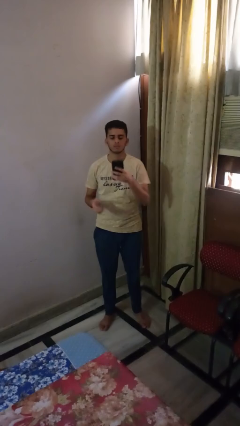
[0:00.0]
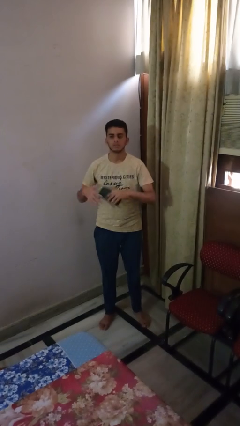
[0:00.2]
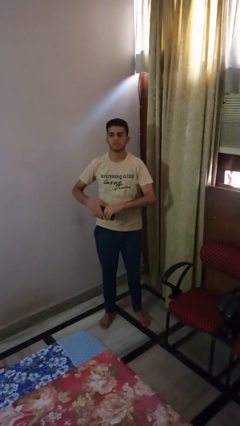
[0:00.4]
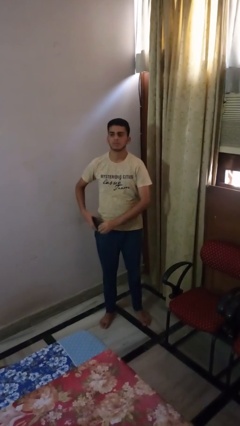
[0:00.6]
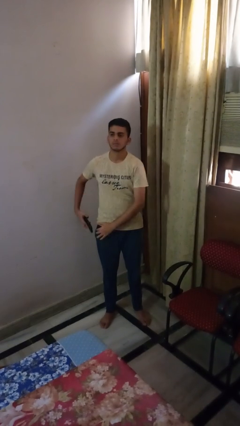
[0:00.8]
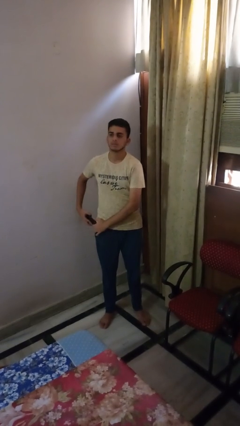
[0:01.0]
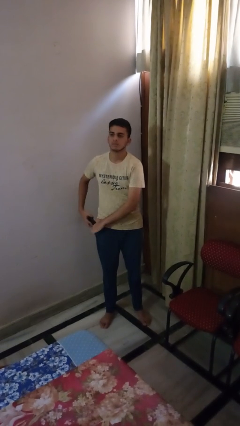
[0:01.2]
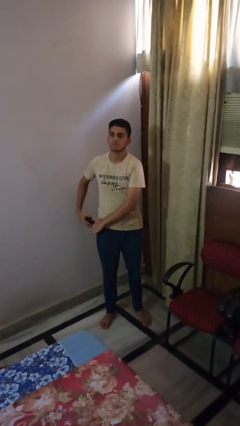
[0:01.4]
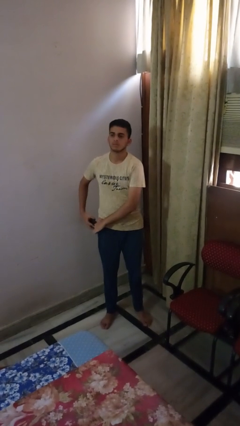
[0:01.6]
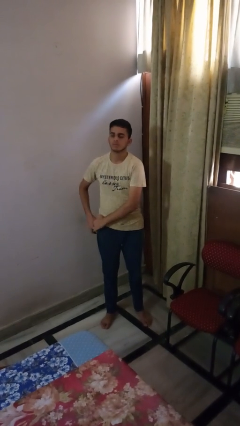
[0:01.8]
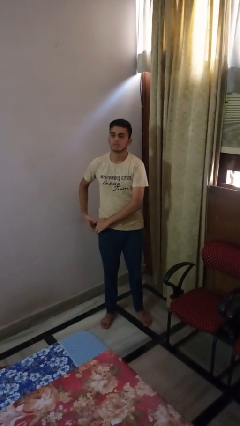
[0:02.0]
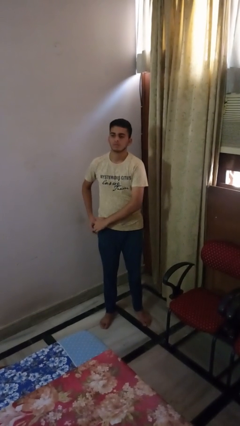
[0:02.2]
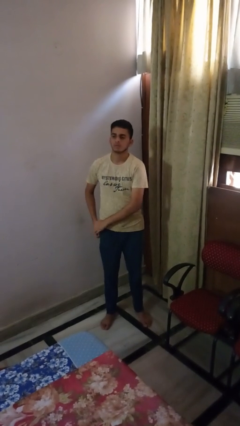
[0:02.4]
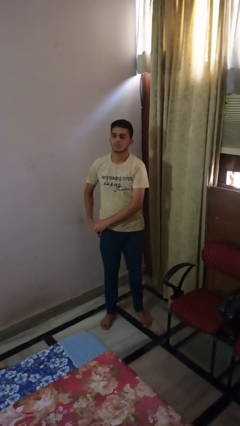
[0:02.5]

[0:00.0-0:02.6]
person puts phone into pocket

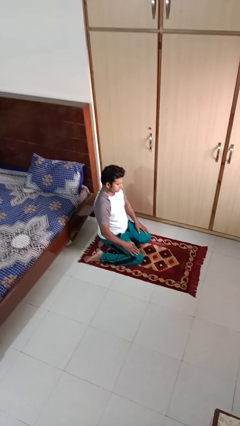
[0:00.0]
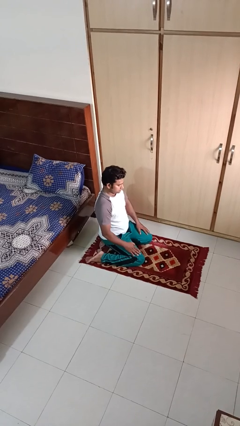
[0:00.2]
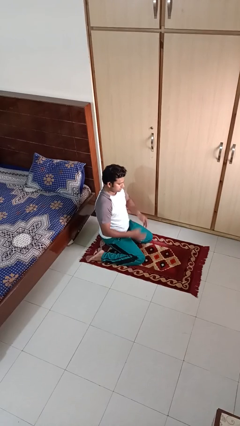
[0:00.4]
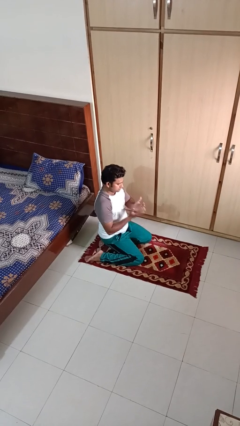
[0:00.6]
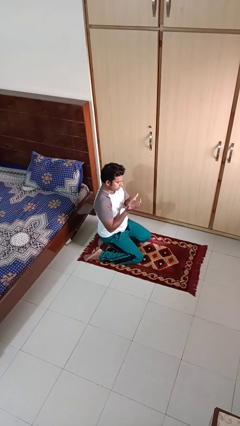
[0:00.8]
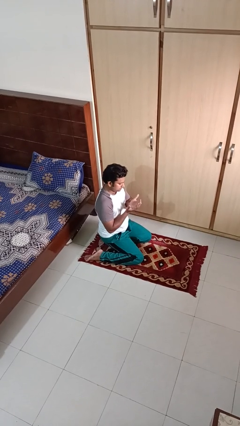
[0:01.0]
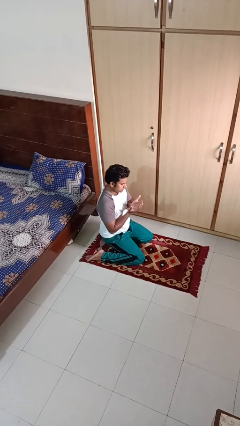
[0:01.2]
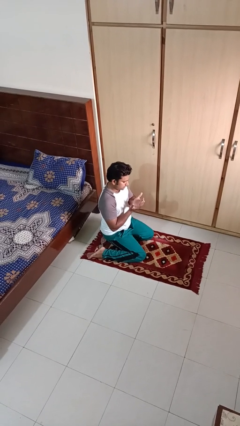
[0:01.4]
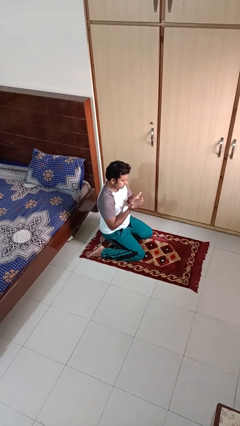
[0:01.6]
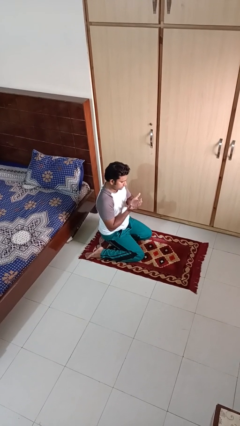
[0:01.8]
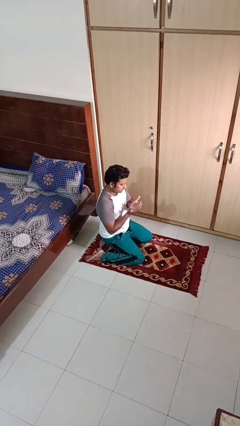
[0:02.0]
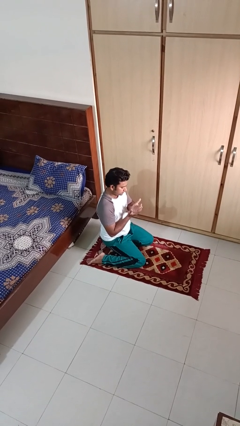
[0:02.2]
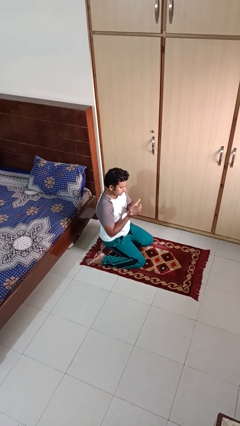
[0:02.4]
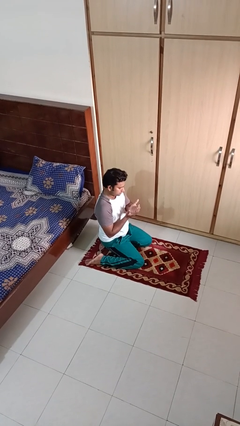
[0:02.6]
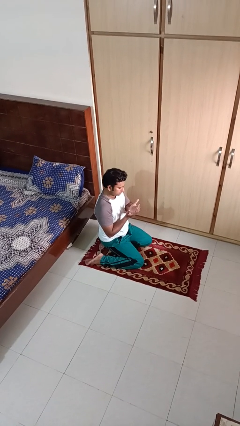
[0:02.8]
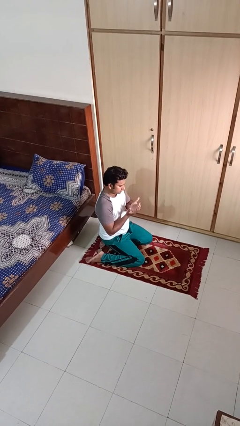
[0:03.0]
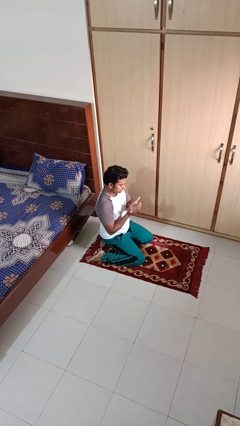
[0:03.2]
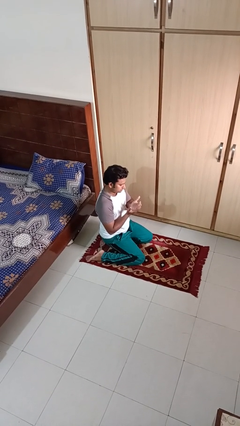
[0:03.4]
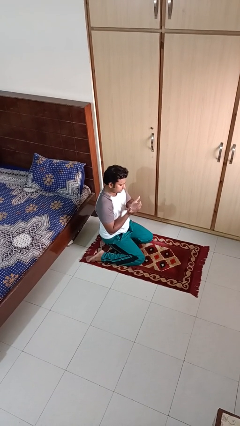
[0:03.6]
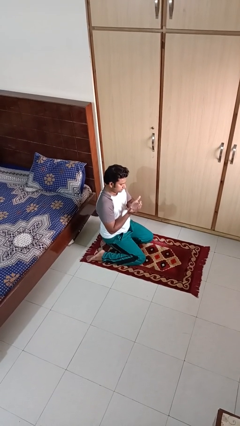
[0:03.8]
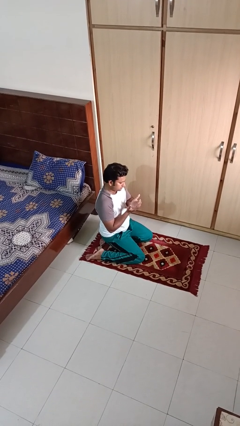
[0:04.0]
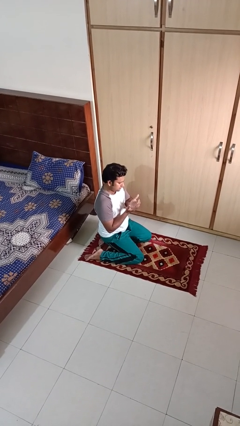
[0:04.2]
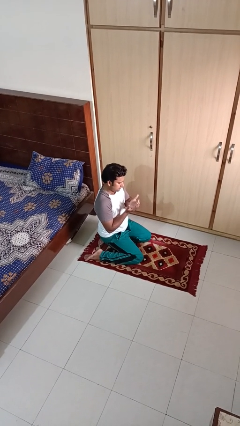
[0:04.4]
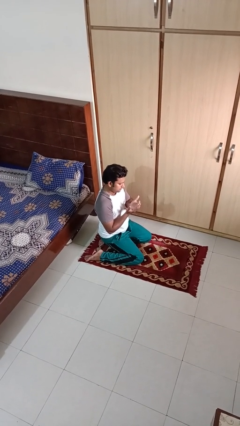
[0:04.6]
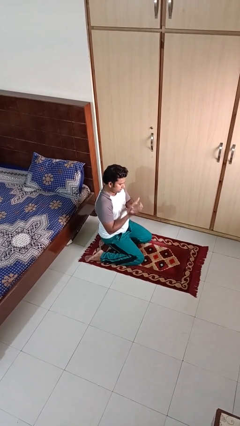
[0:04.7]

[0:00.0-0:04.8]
person prays

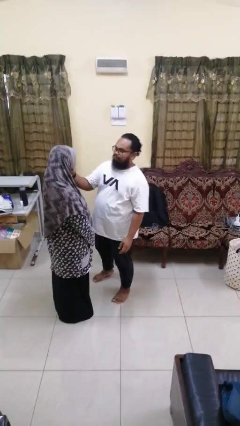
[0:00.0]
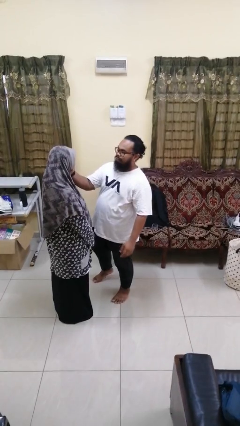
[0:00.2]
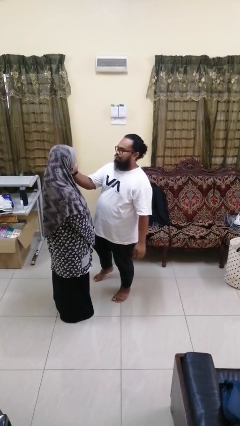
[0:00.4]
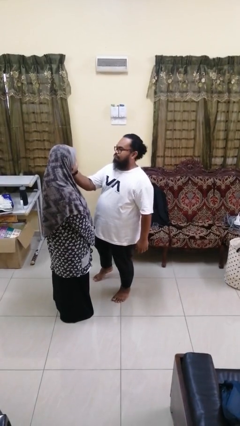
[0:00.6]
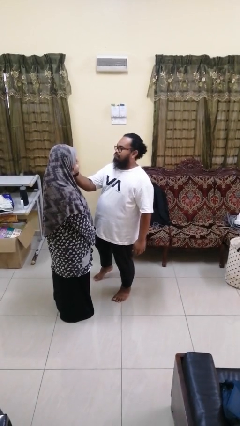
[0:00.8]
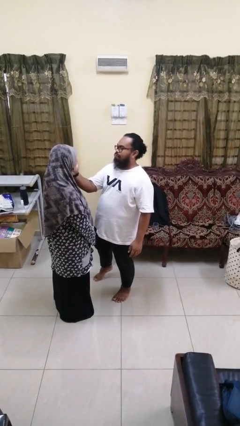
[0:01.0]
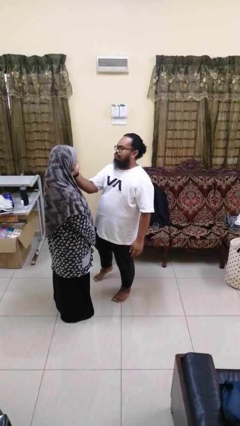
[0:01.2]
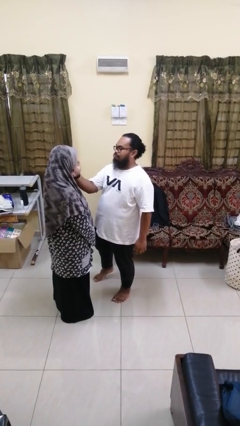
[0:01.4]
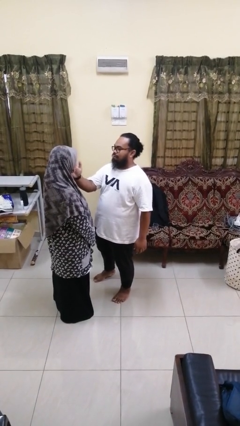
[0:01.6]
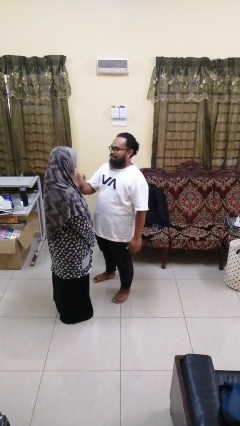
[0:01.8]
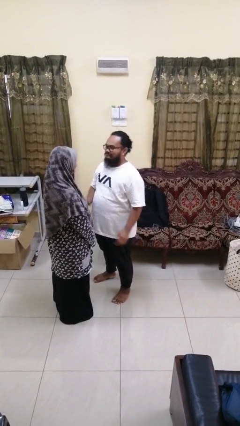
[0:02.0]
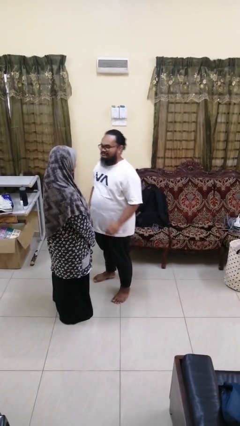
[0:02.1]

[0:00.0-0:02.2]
person touches face of person

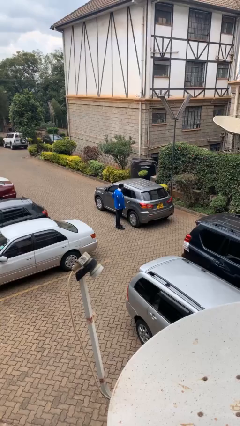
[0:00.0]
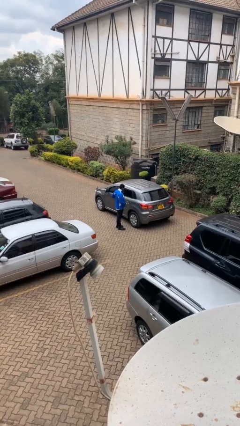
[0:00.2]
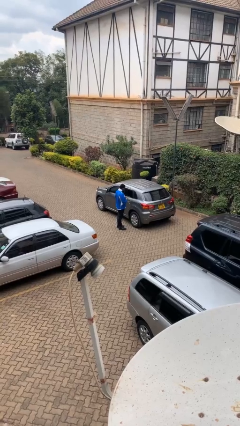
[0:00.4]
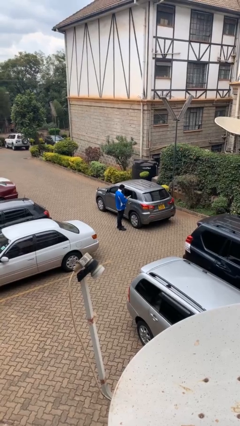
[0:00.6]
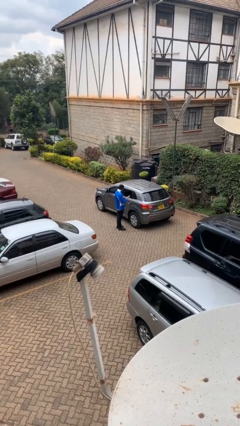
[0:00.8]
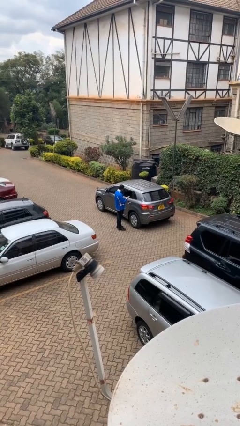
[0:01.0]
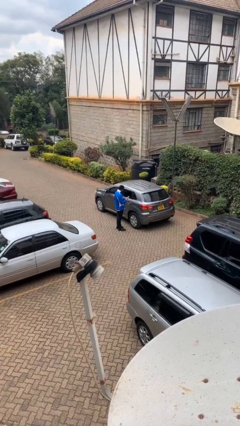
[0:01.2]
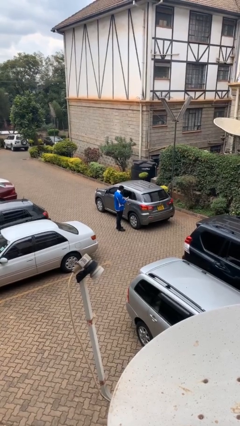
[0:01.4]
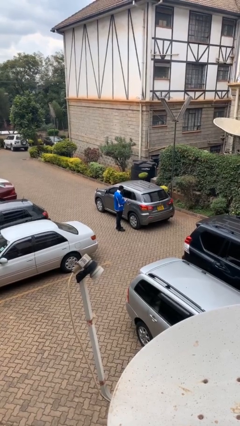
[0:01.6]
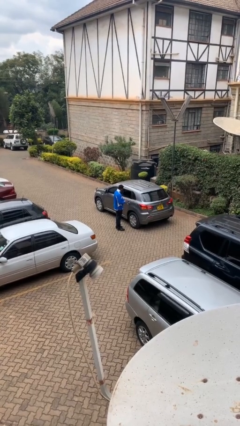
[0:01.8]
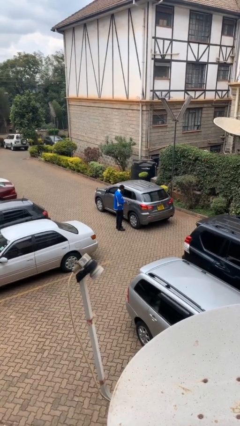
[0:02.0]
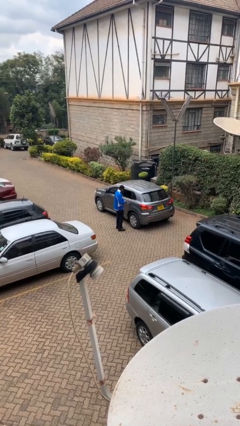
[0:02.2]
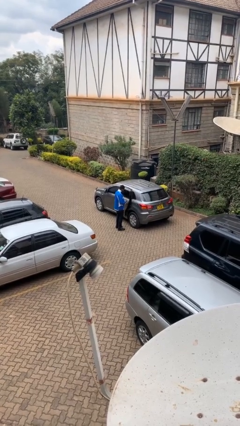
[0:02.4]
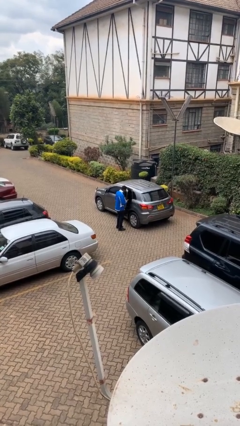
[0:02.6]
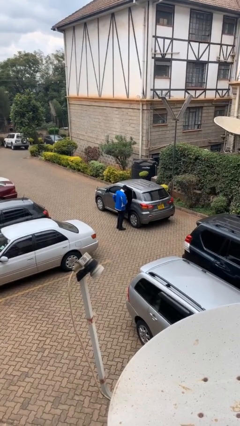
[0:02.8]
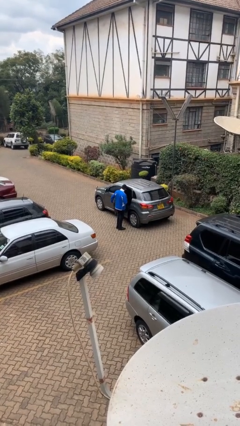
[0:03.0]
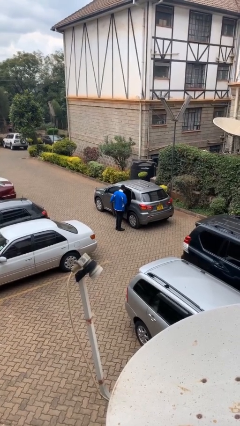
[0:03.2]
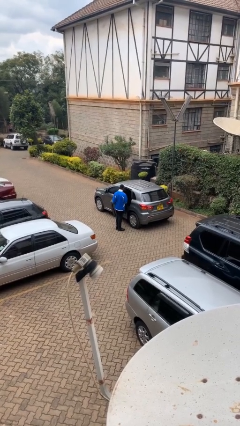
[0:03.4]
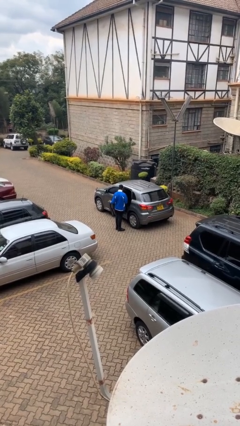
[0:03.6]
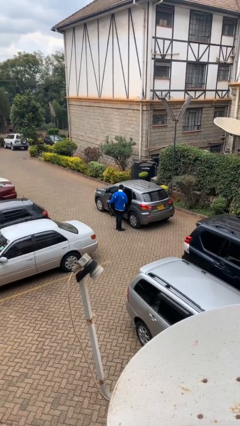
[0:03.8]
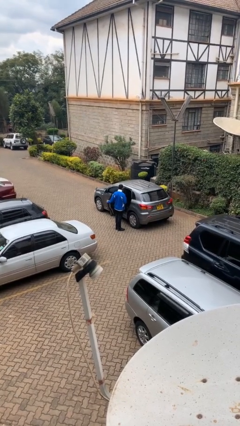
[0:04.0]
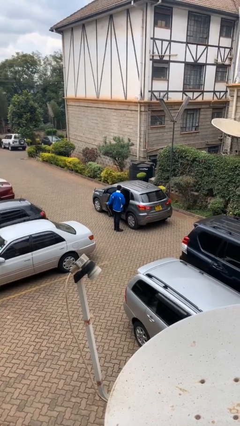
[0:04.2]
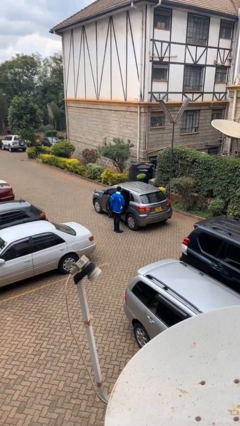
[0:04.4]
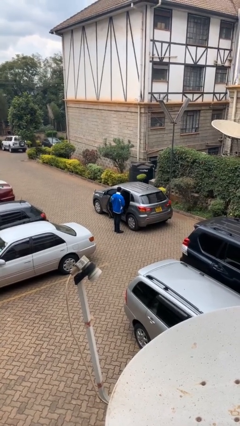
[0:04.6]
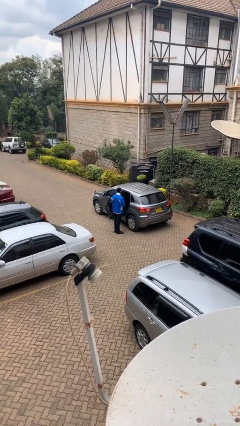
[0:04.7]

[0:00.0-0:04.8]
person opens car door

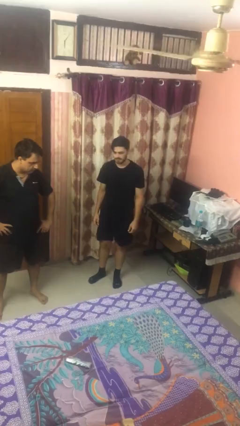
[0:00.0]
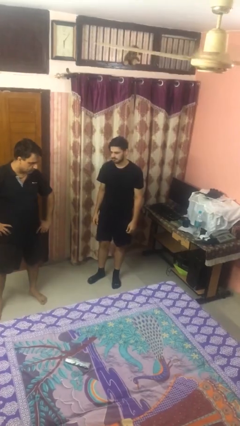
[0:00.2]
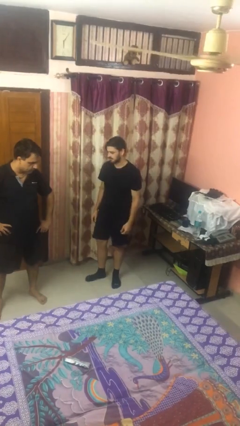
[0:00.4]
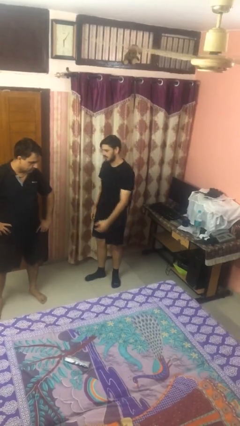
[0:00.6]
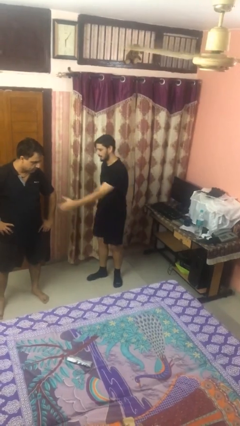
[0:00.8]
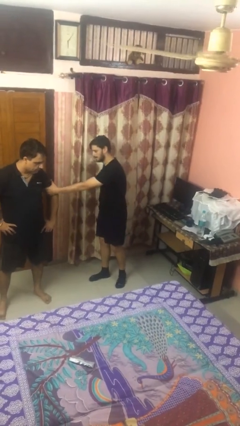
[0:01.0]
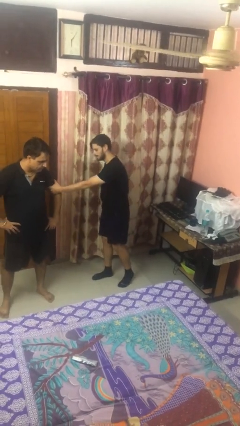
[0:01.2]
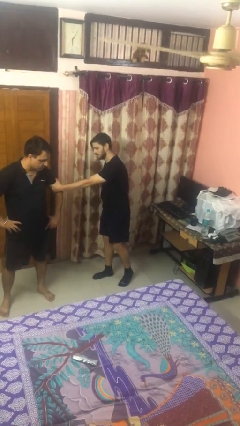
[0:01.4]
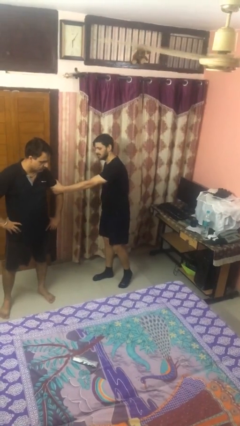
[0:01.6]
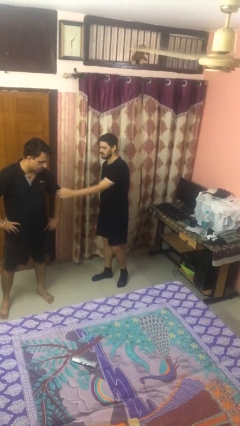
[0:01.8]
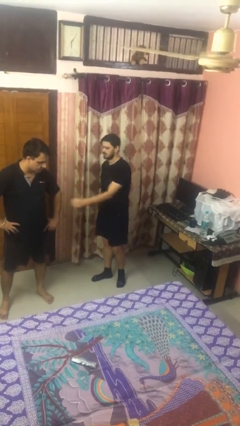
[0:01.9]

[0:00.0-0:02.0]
person grabs person by bicep

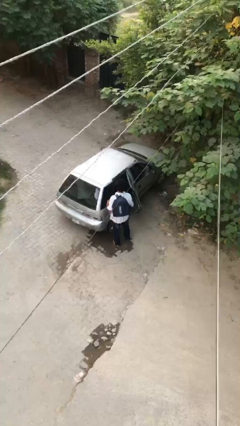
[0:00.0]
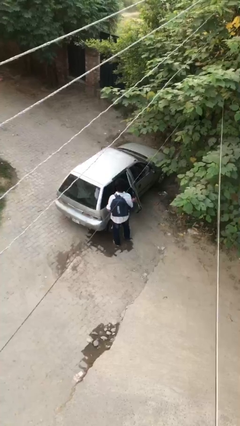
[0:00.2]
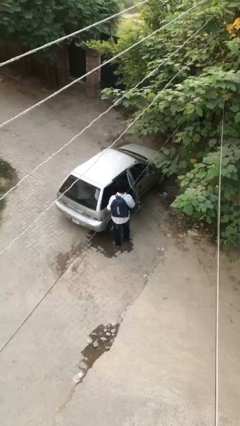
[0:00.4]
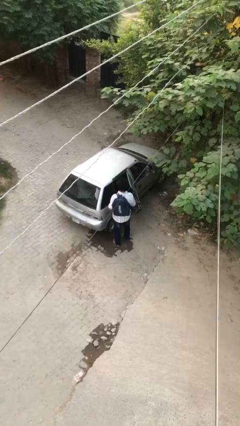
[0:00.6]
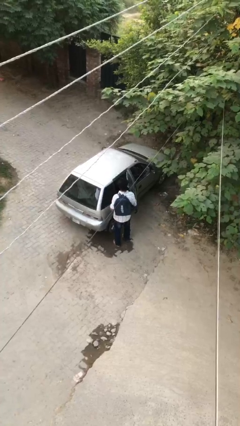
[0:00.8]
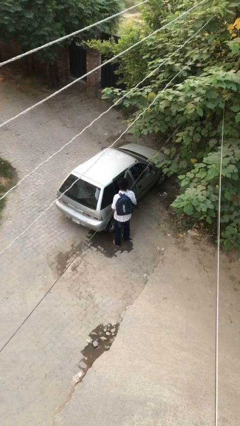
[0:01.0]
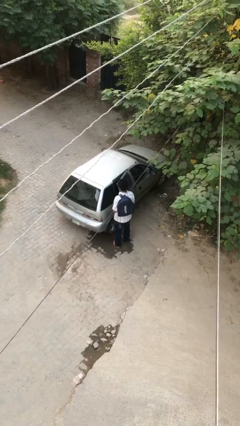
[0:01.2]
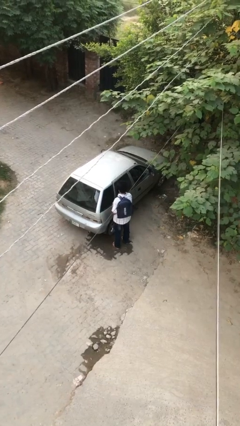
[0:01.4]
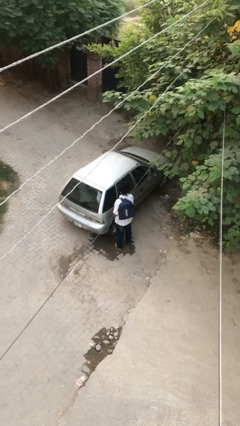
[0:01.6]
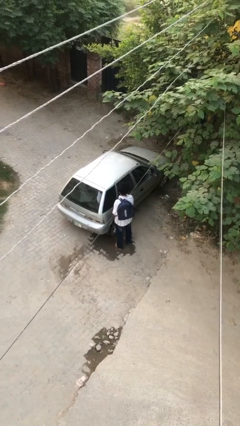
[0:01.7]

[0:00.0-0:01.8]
person closes car door
